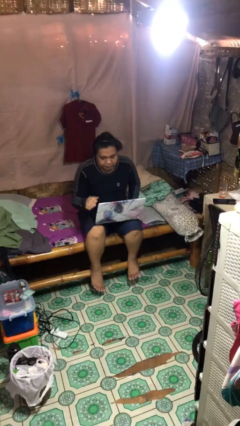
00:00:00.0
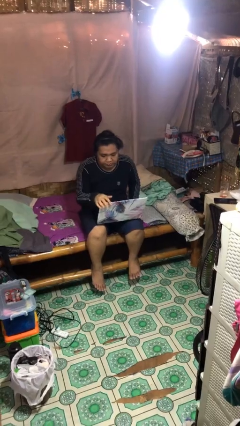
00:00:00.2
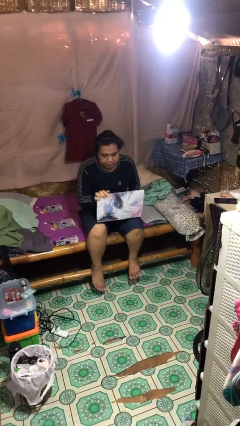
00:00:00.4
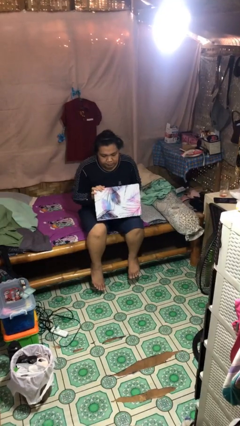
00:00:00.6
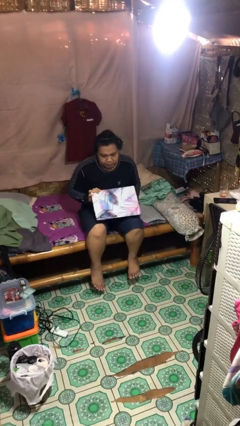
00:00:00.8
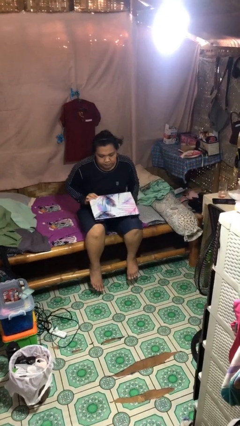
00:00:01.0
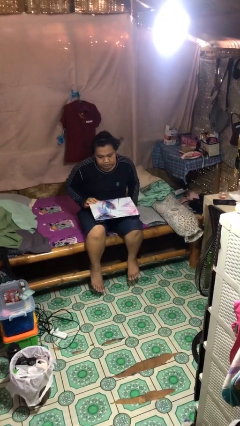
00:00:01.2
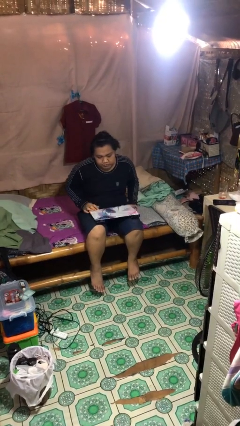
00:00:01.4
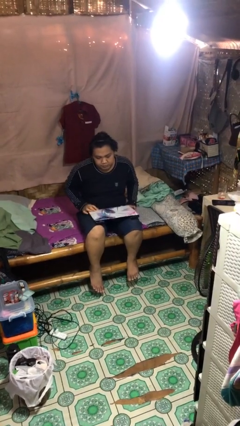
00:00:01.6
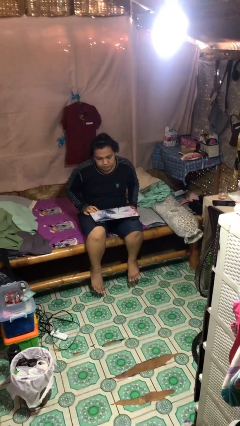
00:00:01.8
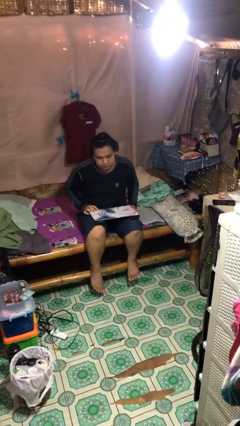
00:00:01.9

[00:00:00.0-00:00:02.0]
person closes laptop

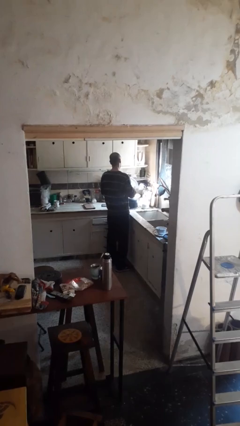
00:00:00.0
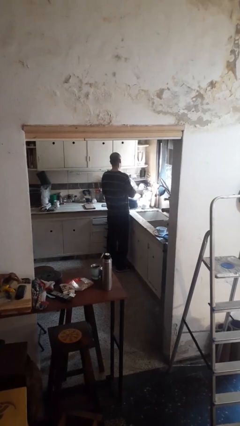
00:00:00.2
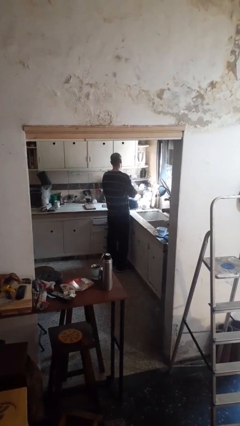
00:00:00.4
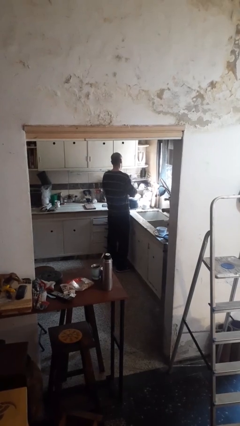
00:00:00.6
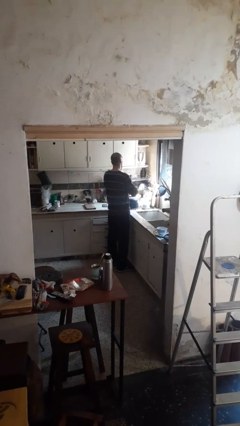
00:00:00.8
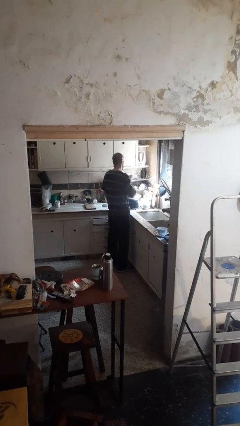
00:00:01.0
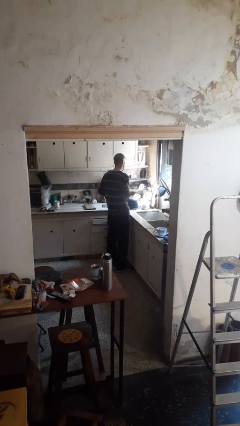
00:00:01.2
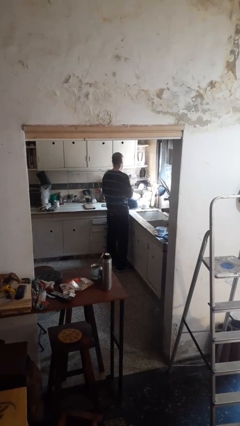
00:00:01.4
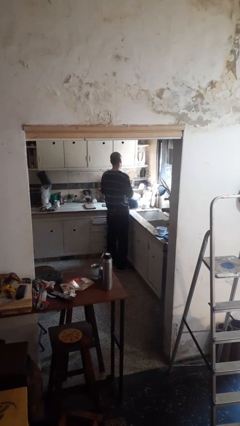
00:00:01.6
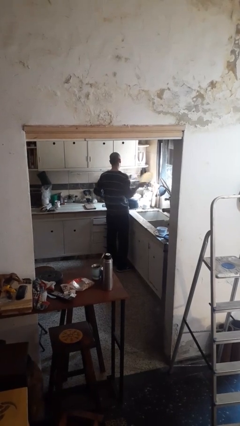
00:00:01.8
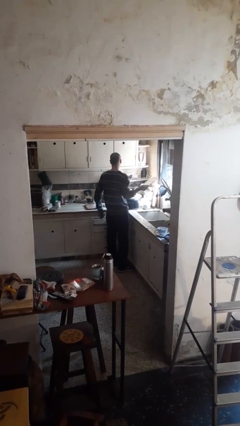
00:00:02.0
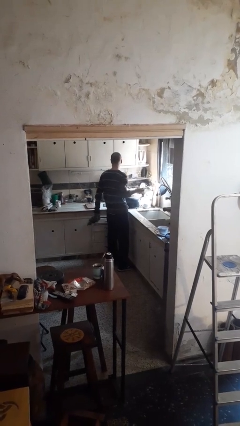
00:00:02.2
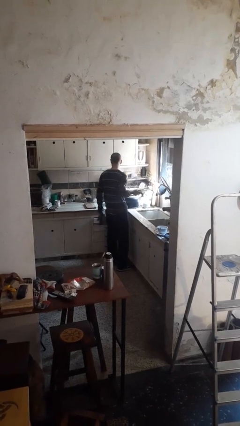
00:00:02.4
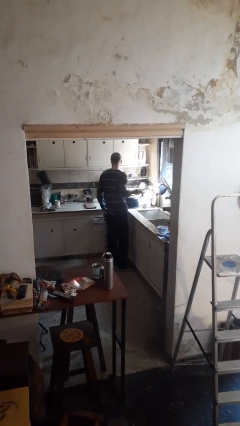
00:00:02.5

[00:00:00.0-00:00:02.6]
person dries dish

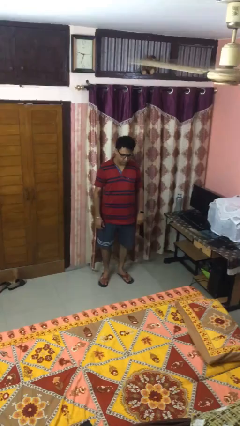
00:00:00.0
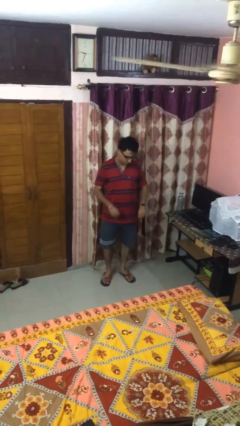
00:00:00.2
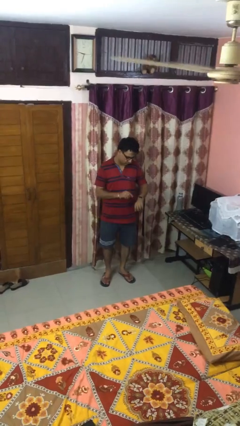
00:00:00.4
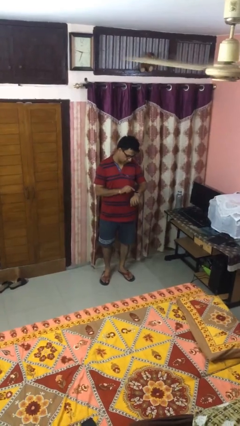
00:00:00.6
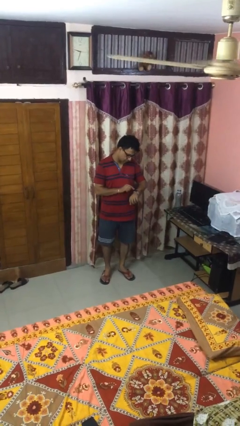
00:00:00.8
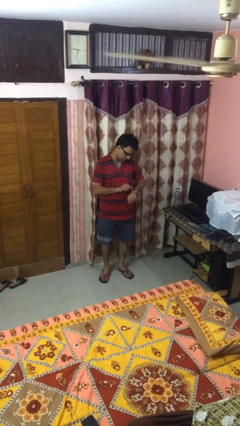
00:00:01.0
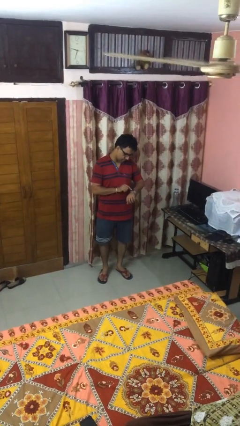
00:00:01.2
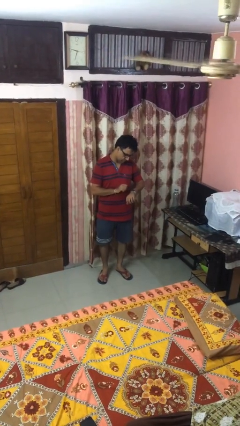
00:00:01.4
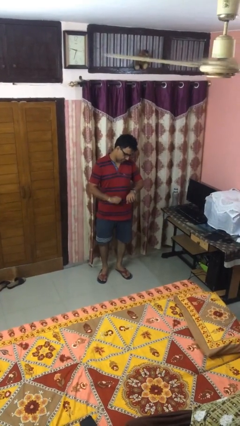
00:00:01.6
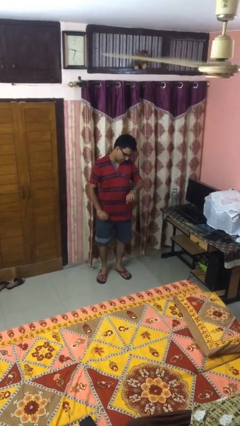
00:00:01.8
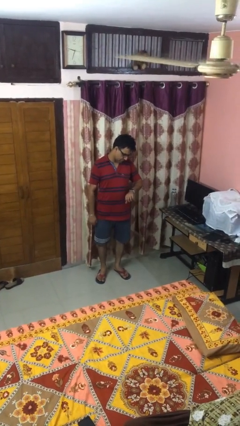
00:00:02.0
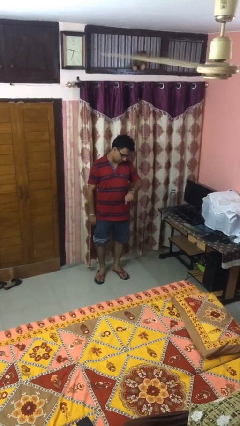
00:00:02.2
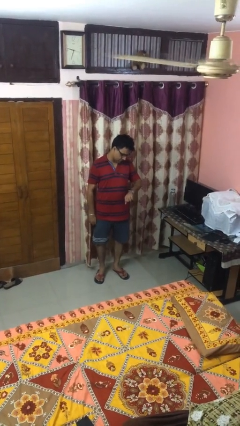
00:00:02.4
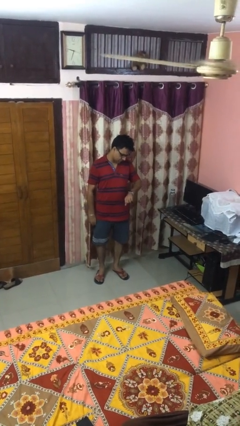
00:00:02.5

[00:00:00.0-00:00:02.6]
person looks at wristwatch

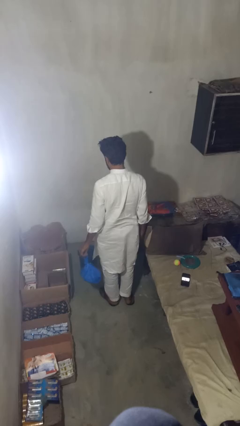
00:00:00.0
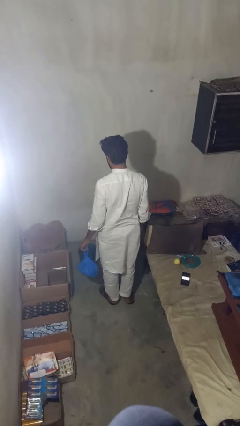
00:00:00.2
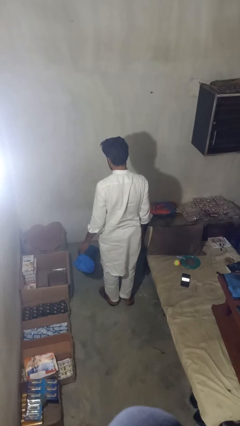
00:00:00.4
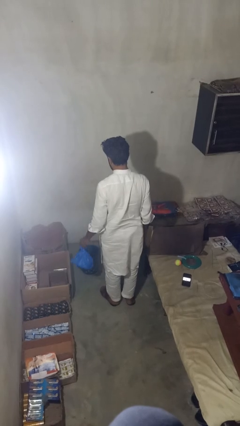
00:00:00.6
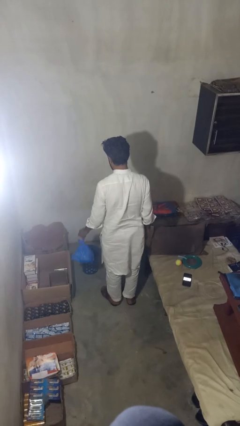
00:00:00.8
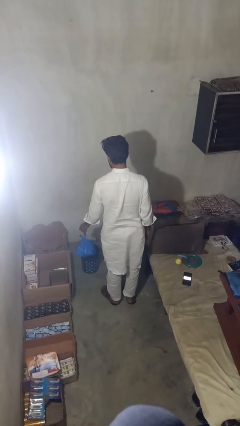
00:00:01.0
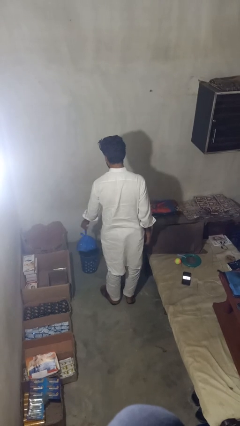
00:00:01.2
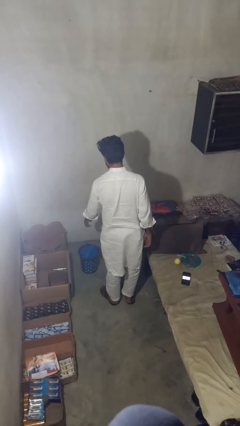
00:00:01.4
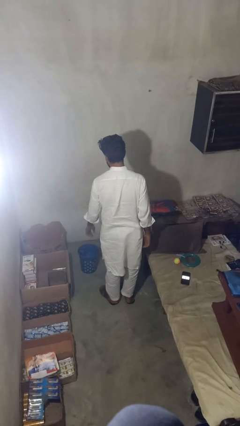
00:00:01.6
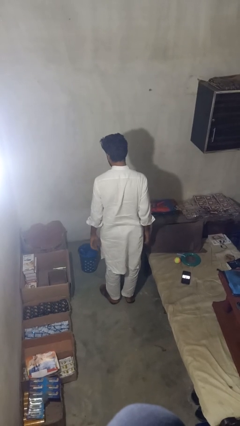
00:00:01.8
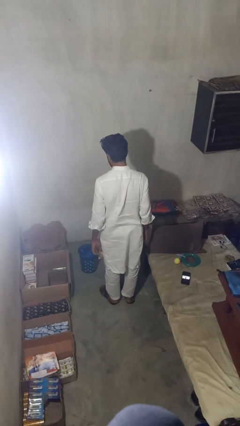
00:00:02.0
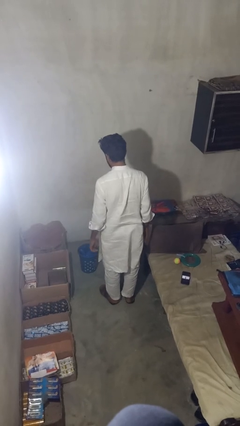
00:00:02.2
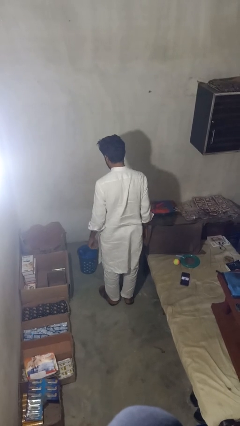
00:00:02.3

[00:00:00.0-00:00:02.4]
person puts object into basket

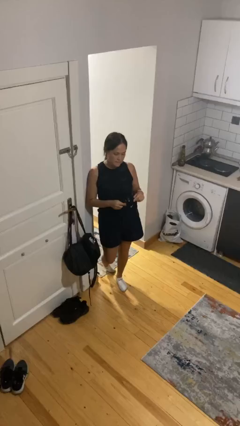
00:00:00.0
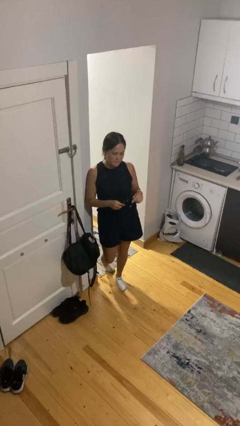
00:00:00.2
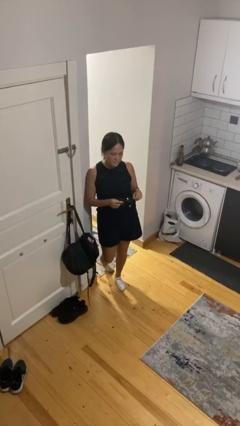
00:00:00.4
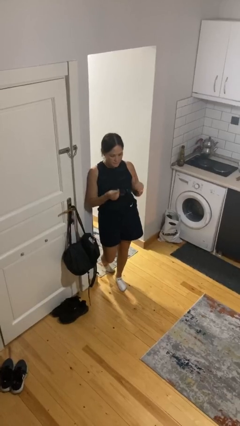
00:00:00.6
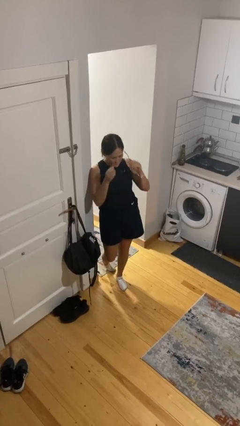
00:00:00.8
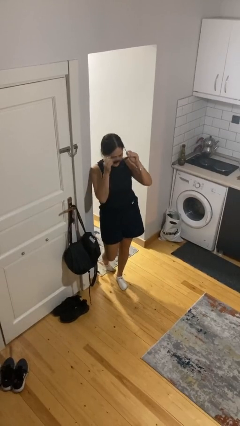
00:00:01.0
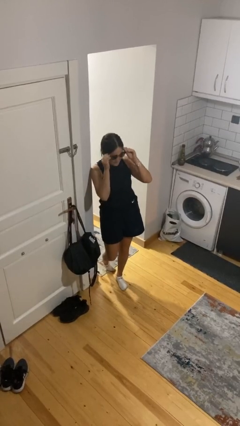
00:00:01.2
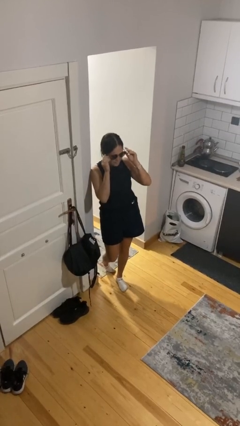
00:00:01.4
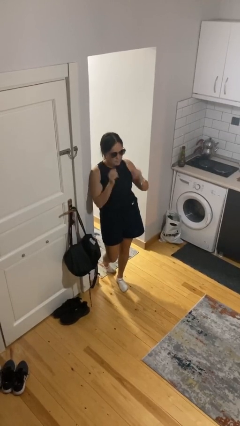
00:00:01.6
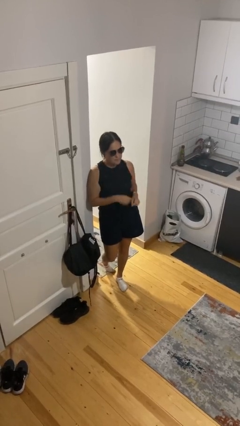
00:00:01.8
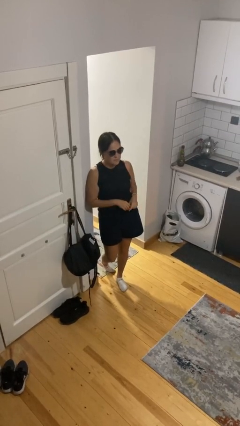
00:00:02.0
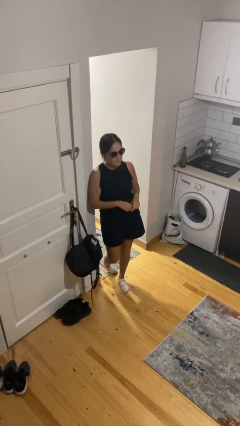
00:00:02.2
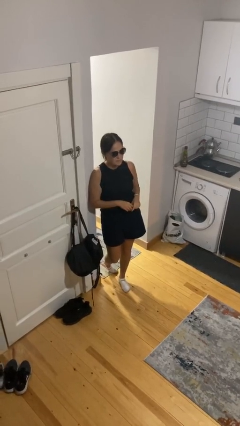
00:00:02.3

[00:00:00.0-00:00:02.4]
person puts on sunglasses

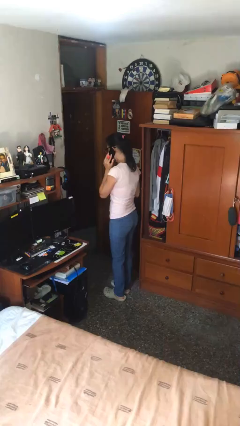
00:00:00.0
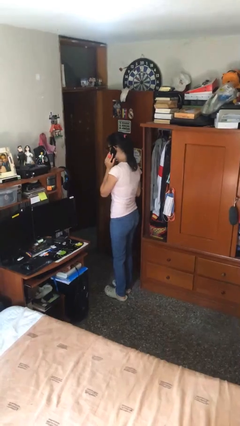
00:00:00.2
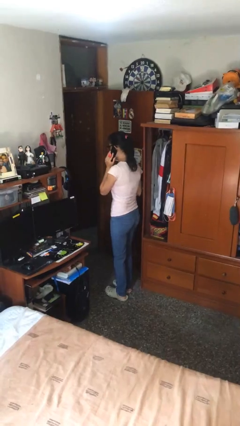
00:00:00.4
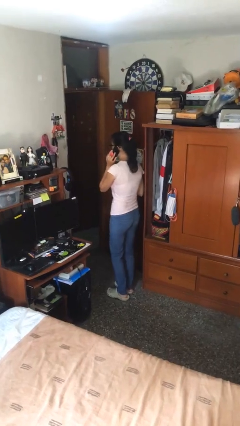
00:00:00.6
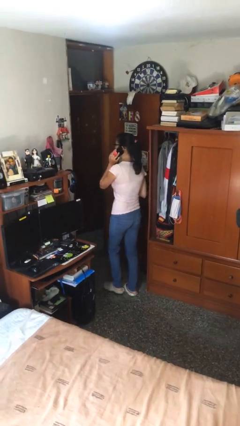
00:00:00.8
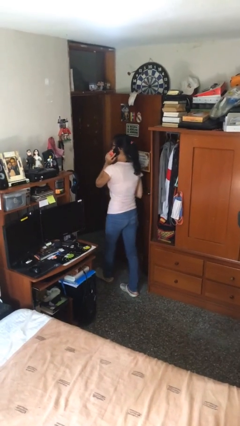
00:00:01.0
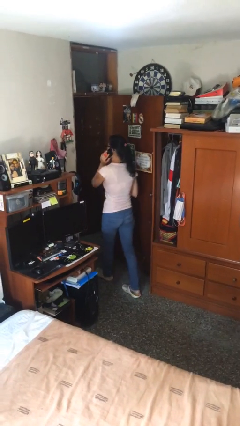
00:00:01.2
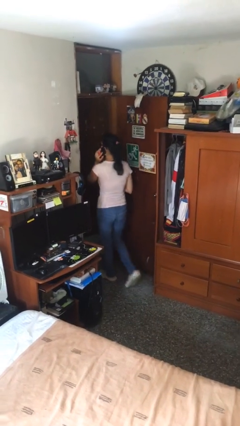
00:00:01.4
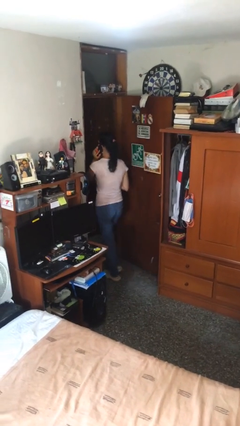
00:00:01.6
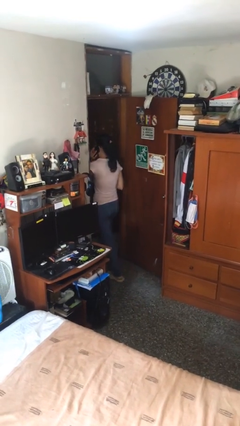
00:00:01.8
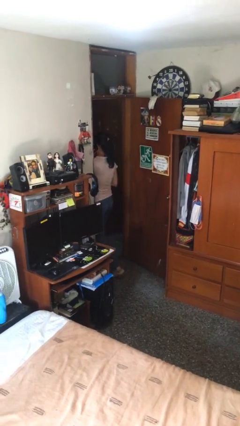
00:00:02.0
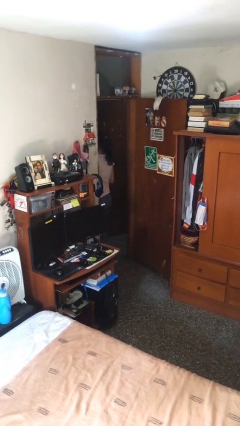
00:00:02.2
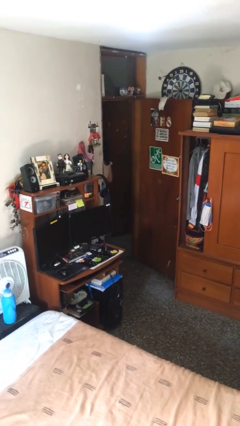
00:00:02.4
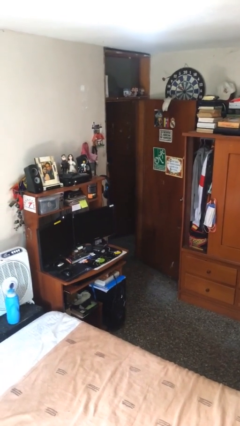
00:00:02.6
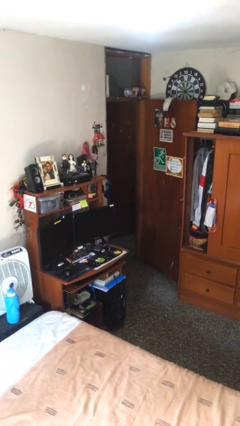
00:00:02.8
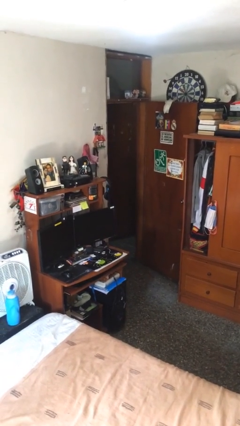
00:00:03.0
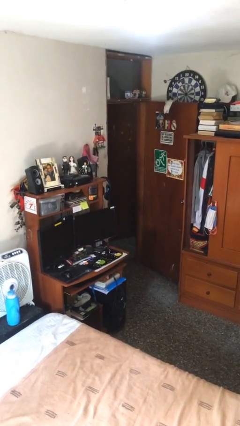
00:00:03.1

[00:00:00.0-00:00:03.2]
person exits scene through structure

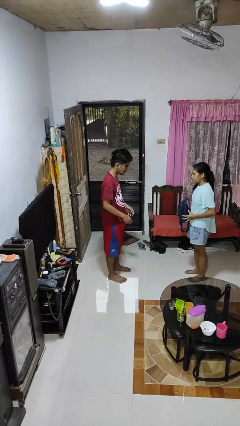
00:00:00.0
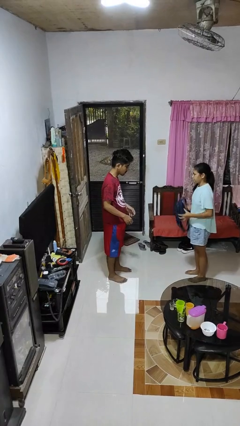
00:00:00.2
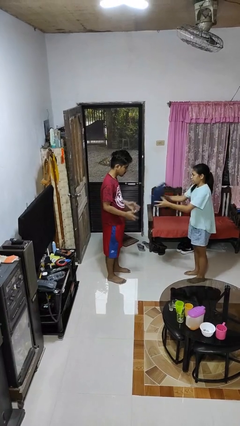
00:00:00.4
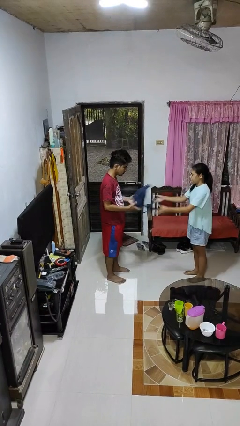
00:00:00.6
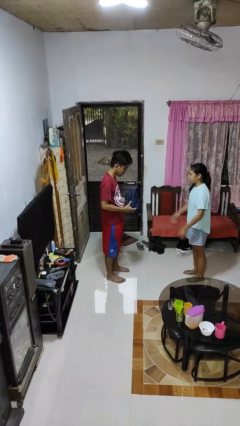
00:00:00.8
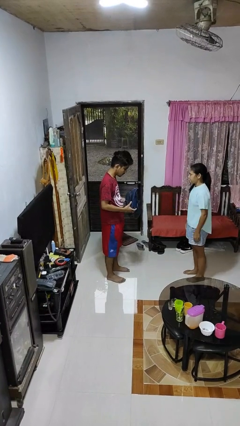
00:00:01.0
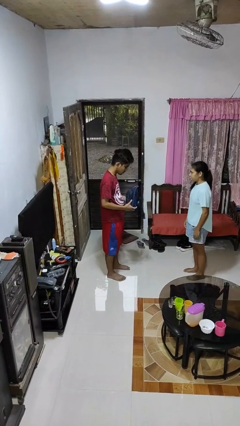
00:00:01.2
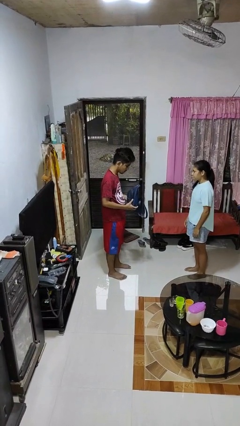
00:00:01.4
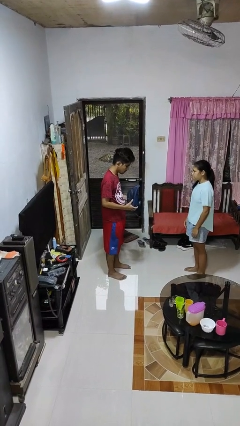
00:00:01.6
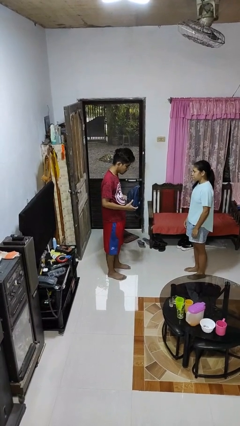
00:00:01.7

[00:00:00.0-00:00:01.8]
person catches object from person
